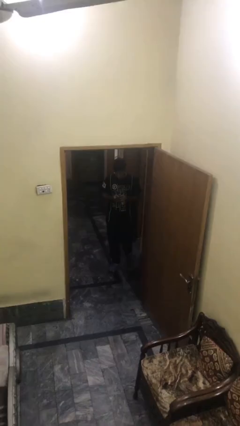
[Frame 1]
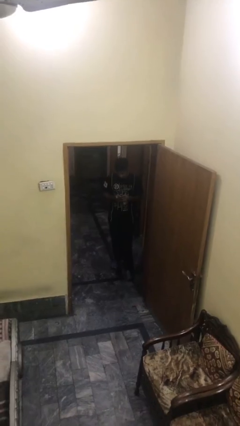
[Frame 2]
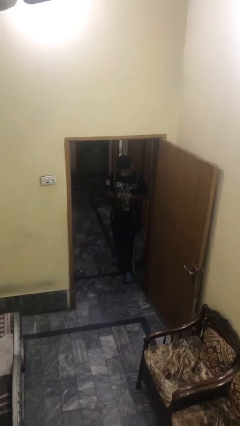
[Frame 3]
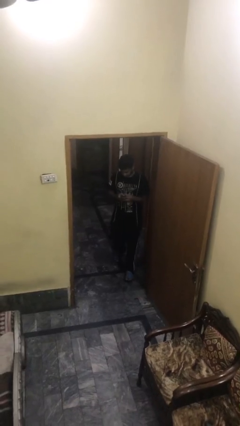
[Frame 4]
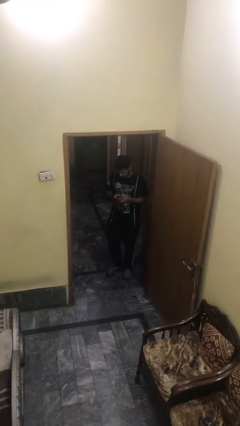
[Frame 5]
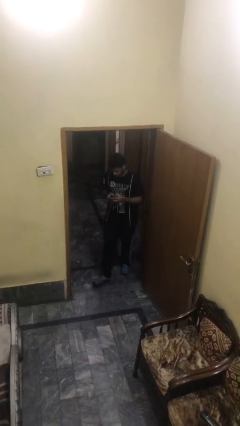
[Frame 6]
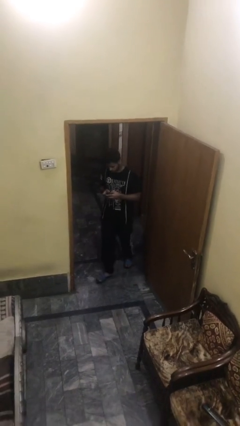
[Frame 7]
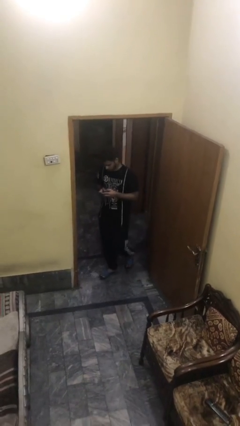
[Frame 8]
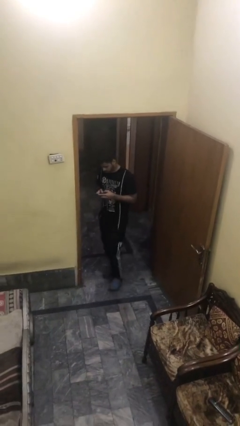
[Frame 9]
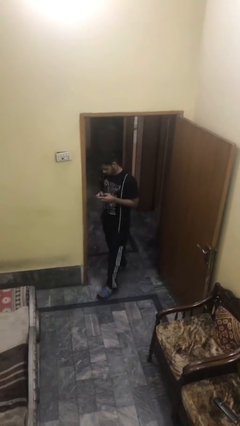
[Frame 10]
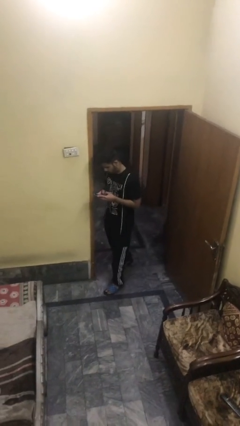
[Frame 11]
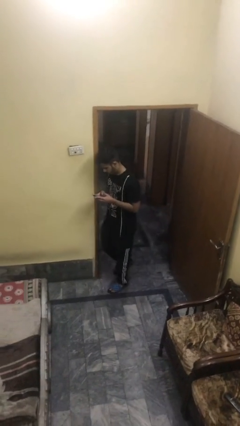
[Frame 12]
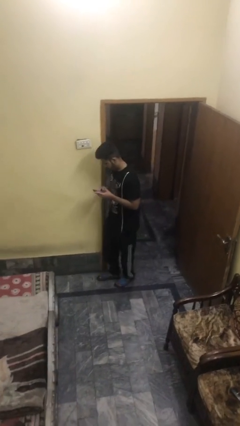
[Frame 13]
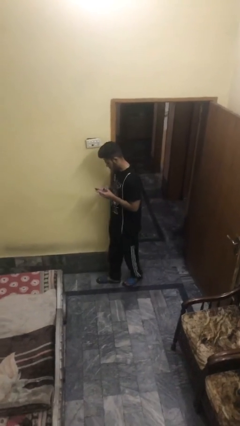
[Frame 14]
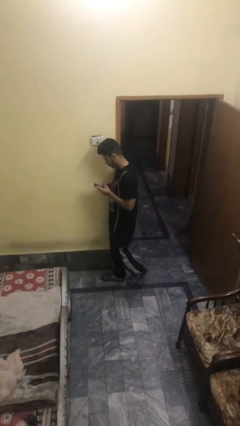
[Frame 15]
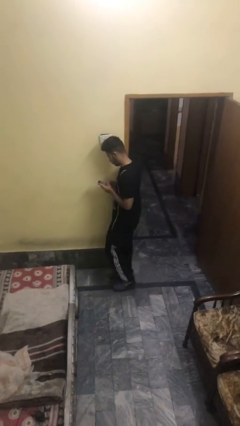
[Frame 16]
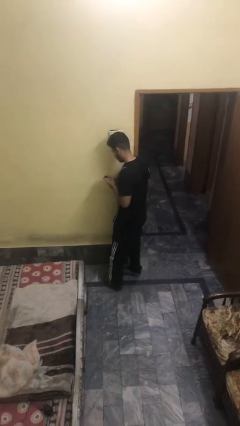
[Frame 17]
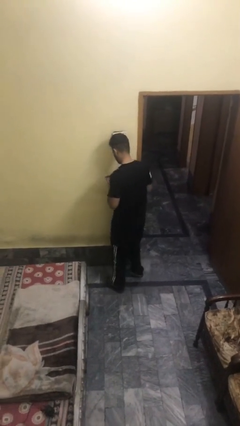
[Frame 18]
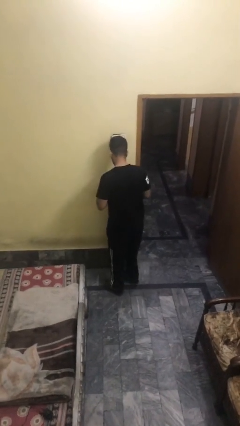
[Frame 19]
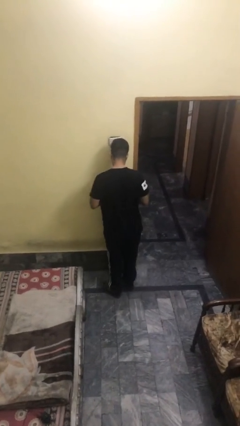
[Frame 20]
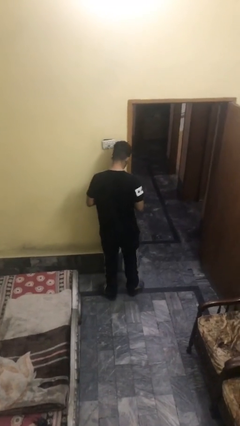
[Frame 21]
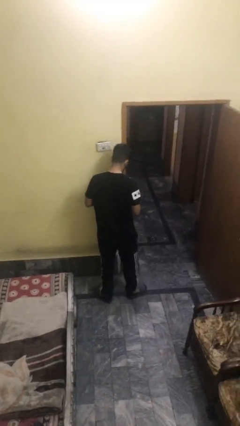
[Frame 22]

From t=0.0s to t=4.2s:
person enters scene through structure

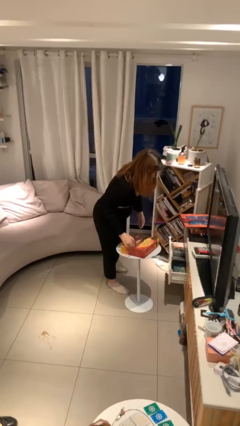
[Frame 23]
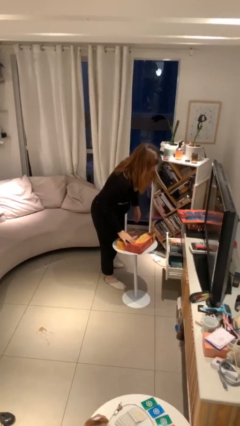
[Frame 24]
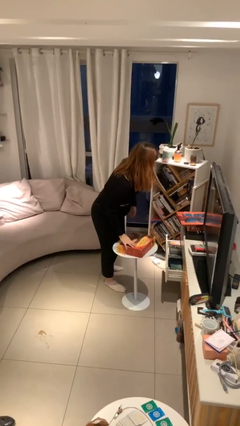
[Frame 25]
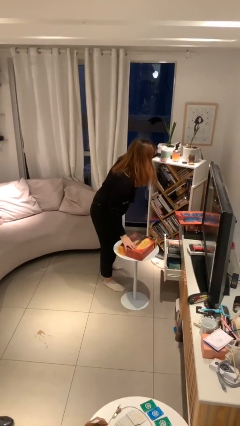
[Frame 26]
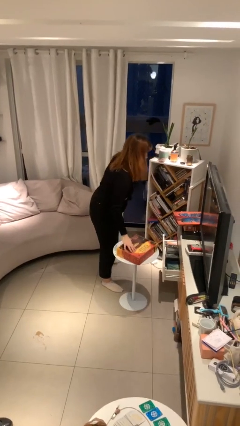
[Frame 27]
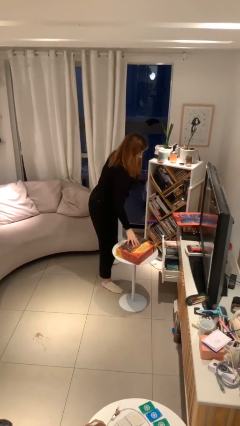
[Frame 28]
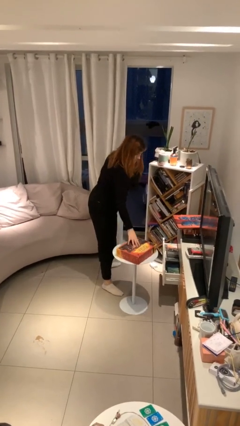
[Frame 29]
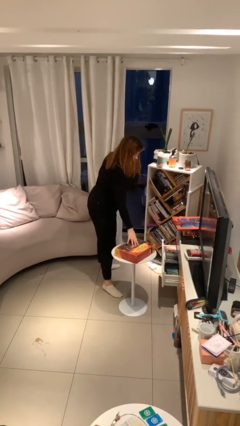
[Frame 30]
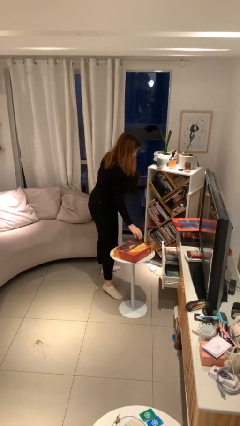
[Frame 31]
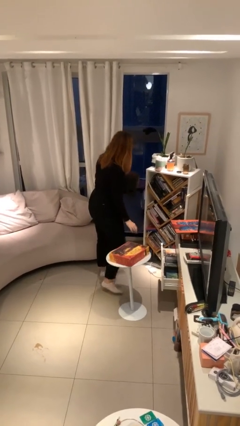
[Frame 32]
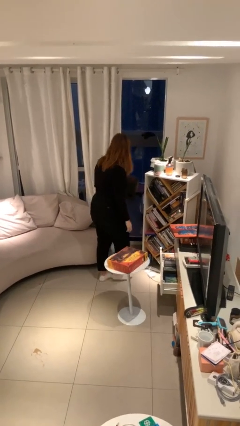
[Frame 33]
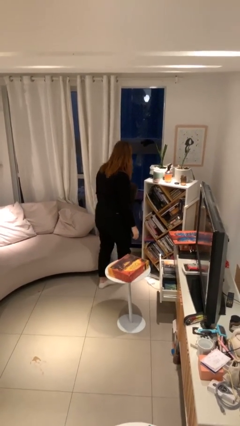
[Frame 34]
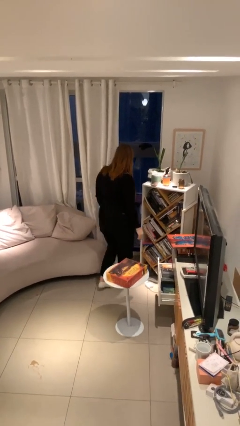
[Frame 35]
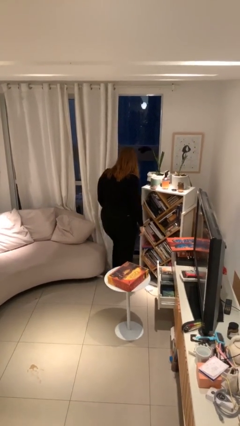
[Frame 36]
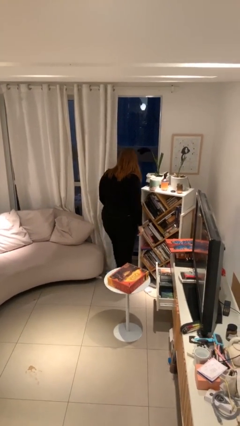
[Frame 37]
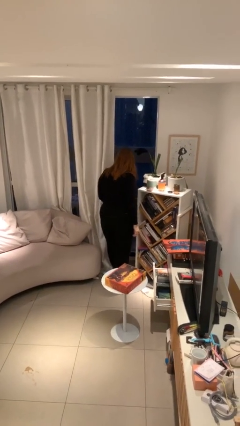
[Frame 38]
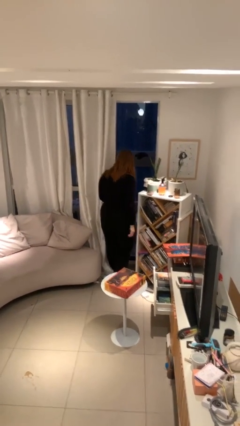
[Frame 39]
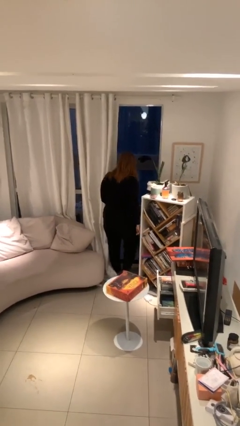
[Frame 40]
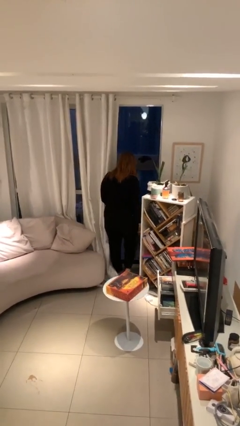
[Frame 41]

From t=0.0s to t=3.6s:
person puts down object on table

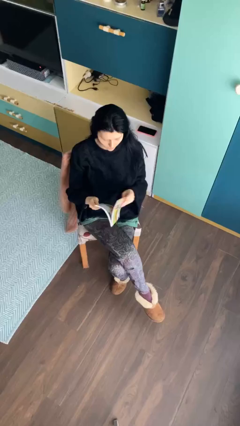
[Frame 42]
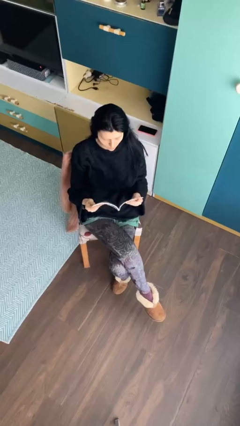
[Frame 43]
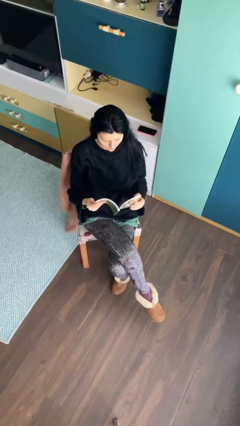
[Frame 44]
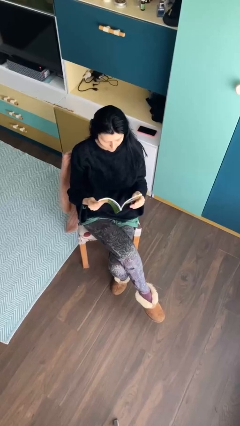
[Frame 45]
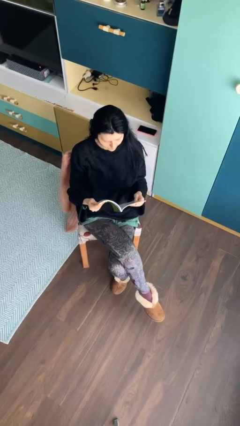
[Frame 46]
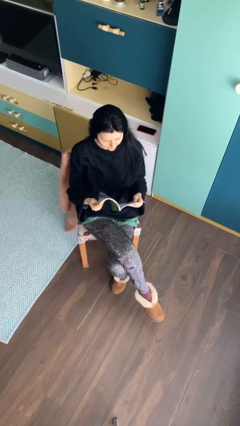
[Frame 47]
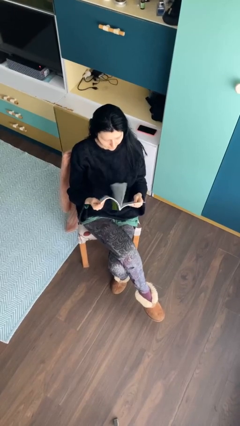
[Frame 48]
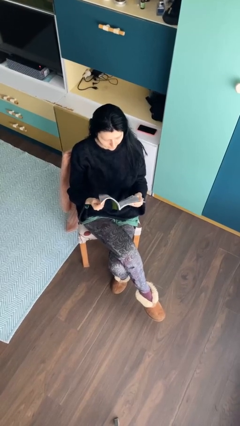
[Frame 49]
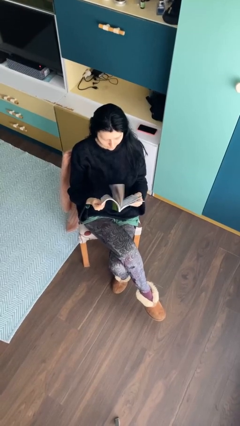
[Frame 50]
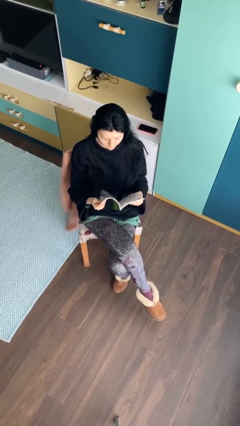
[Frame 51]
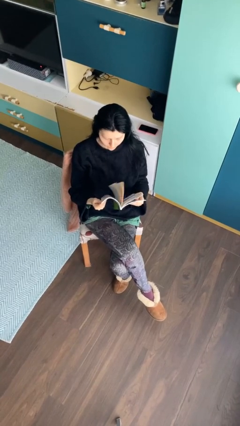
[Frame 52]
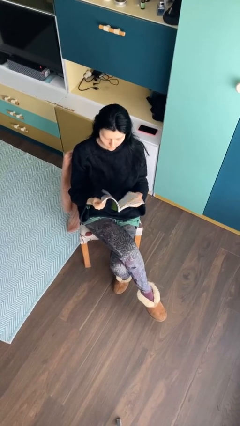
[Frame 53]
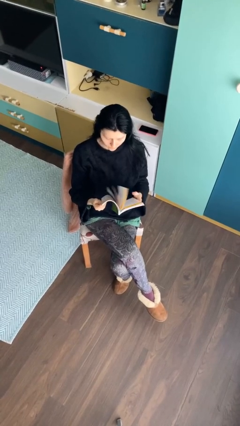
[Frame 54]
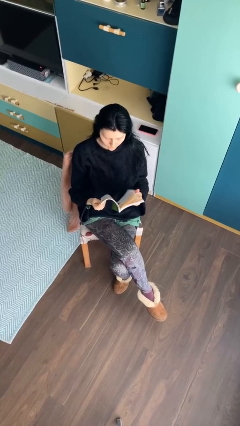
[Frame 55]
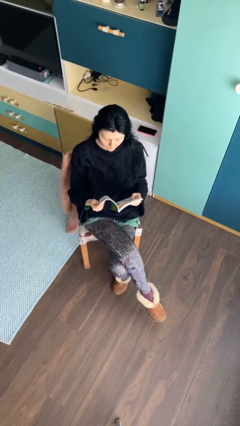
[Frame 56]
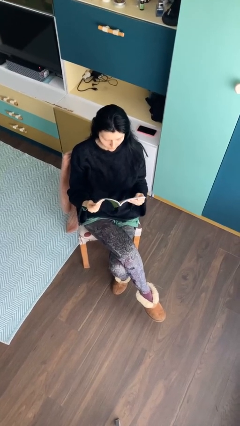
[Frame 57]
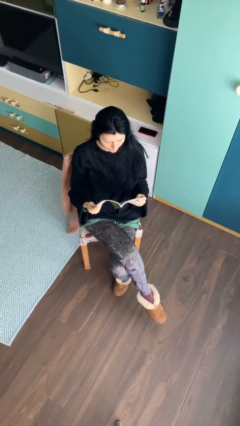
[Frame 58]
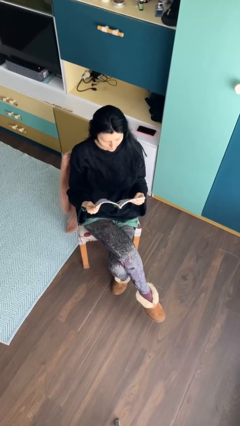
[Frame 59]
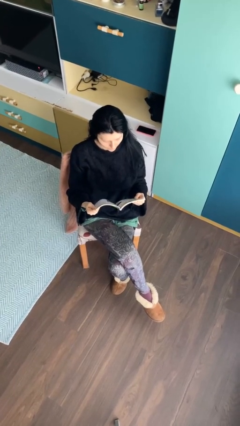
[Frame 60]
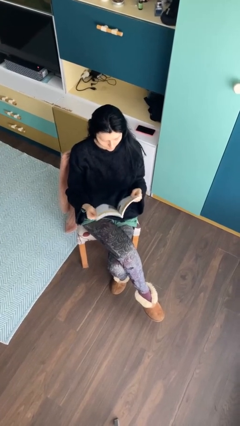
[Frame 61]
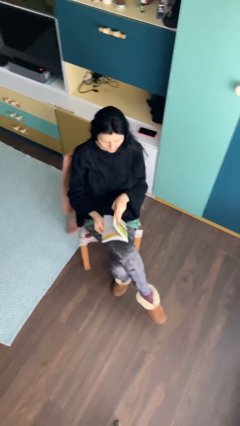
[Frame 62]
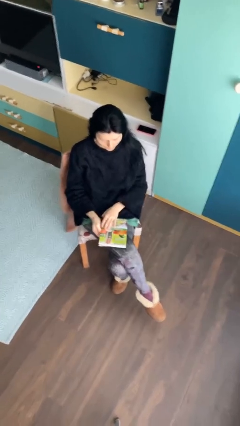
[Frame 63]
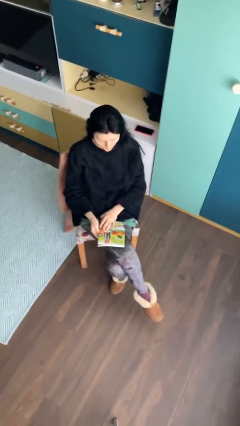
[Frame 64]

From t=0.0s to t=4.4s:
person reads document

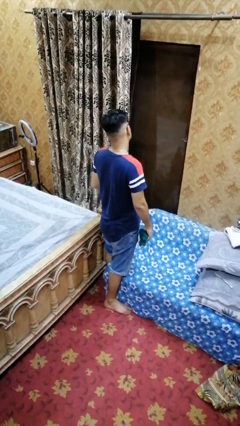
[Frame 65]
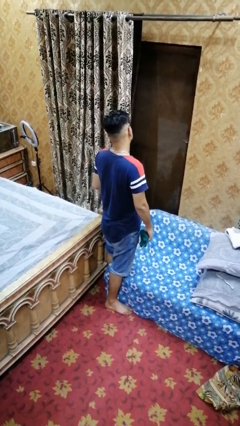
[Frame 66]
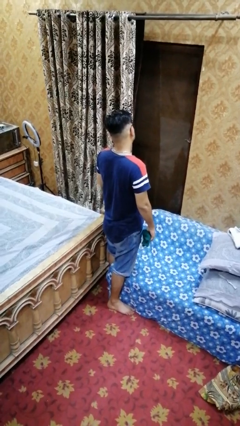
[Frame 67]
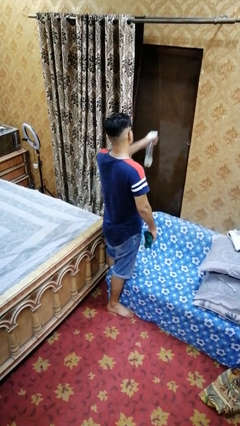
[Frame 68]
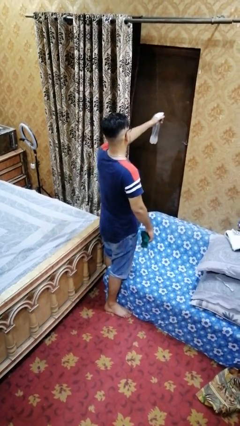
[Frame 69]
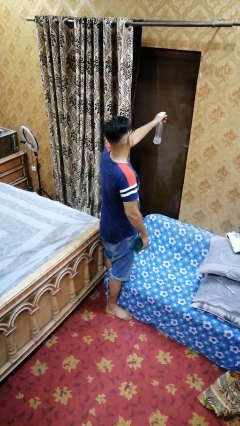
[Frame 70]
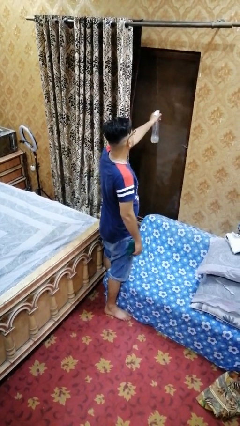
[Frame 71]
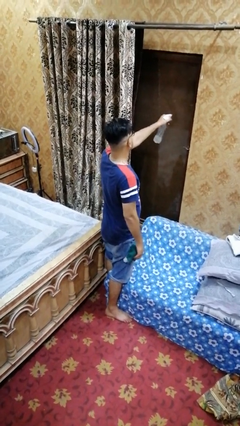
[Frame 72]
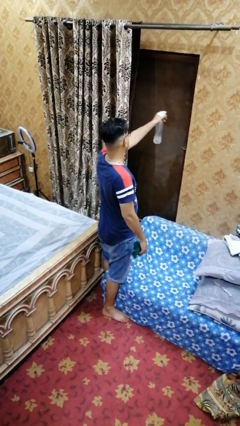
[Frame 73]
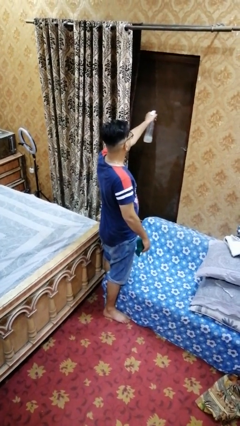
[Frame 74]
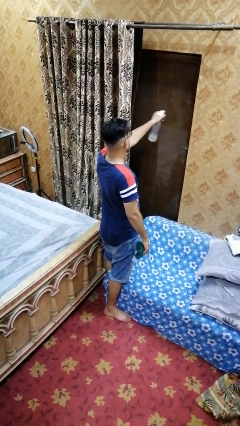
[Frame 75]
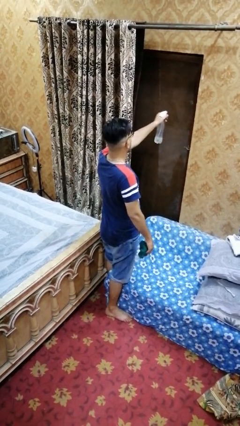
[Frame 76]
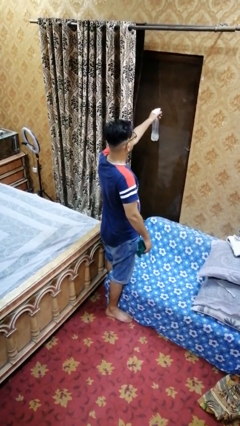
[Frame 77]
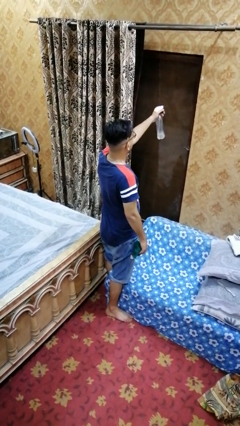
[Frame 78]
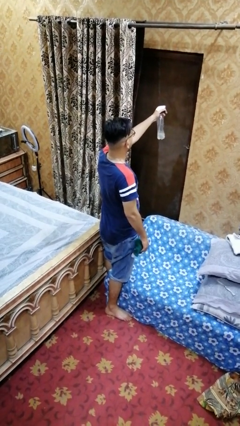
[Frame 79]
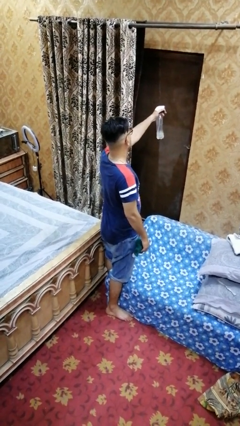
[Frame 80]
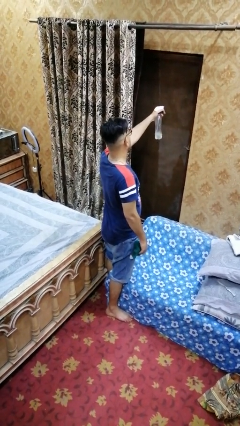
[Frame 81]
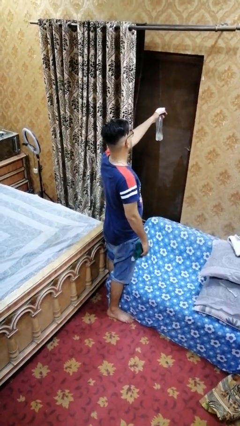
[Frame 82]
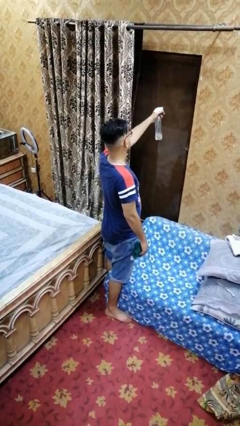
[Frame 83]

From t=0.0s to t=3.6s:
person sprays from bottle

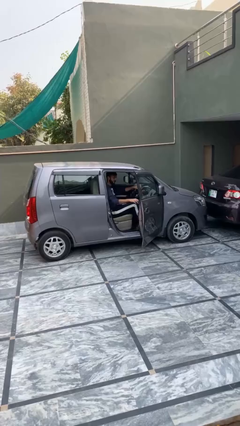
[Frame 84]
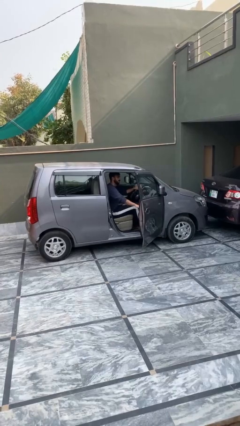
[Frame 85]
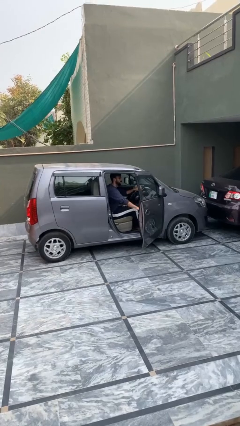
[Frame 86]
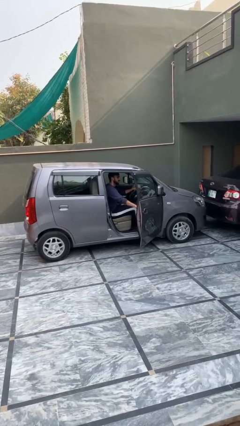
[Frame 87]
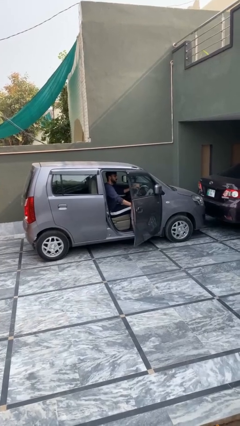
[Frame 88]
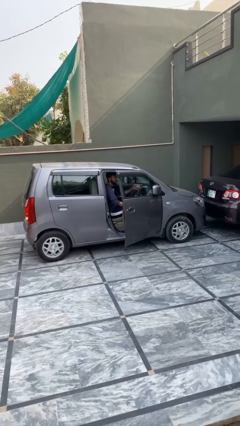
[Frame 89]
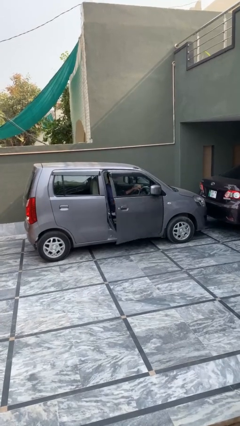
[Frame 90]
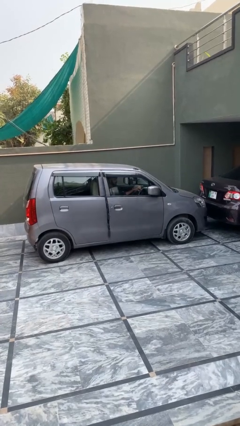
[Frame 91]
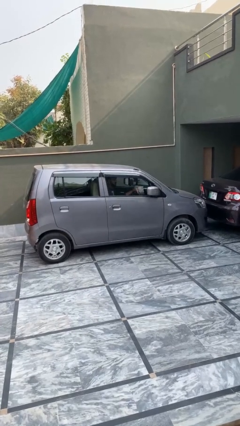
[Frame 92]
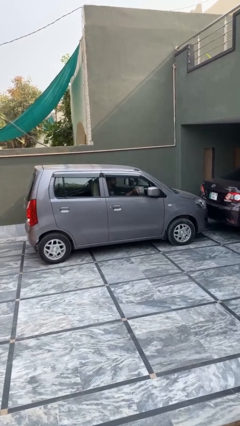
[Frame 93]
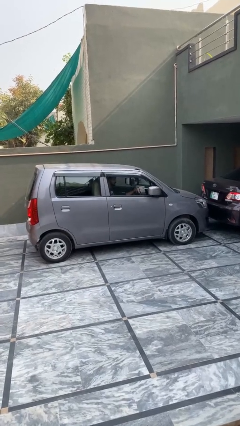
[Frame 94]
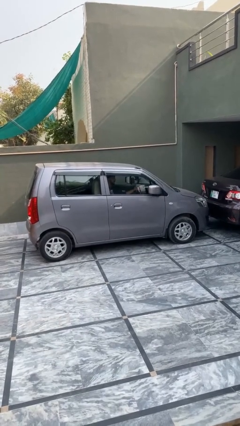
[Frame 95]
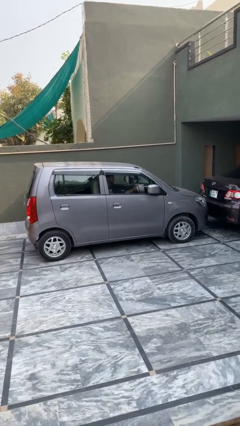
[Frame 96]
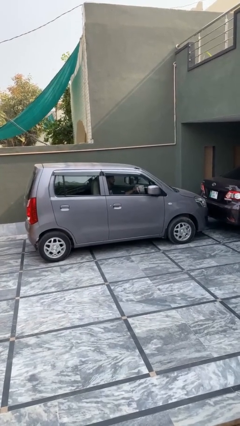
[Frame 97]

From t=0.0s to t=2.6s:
person closes car door
